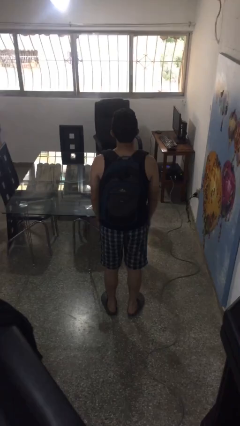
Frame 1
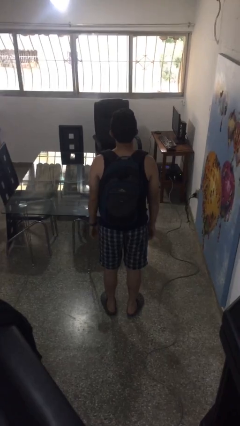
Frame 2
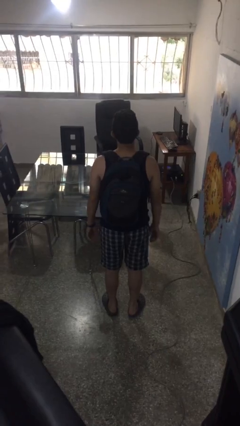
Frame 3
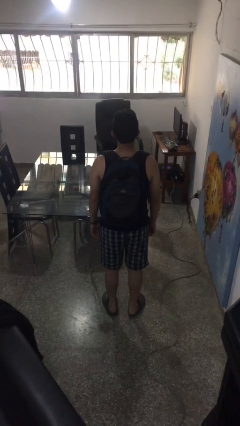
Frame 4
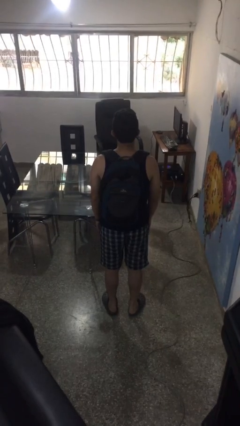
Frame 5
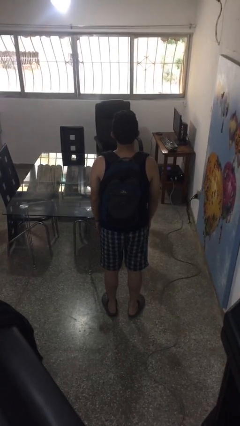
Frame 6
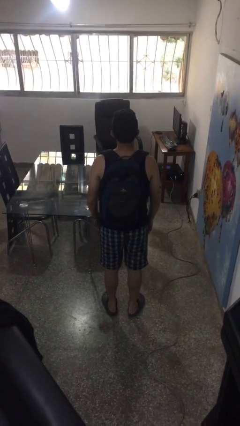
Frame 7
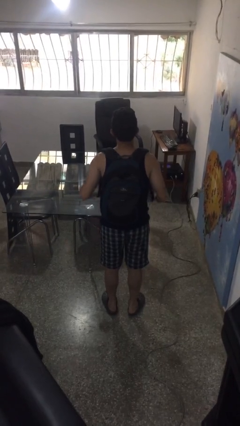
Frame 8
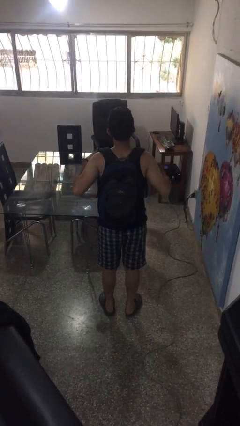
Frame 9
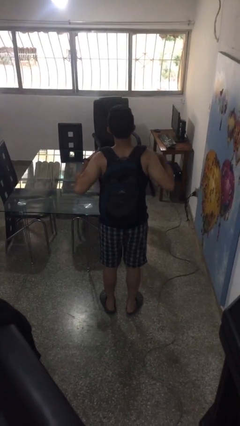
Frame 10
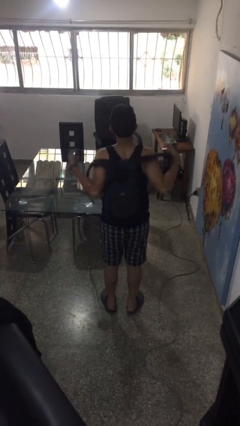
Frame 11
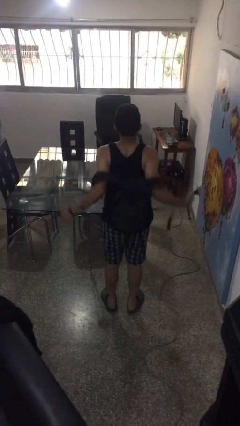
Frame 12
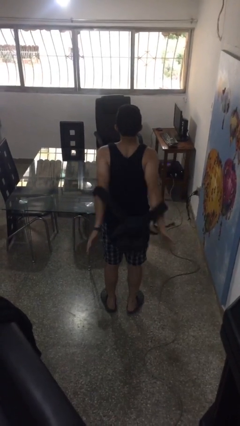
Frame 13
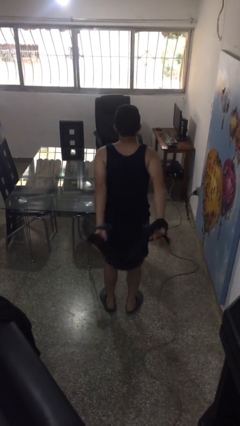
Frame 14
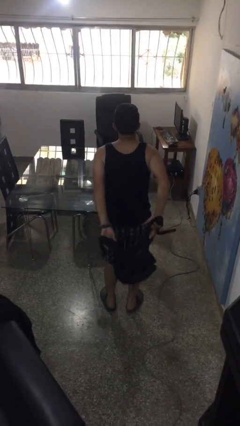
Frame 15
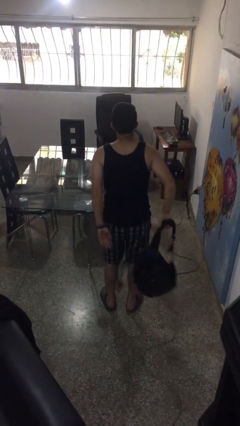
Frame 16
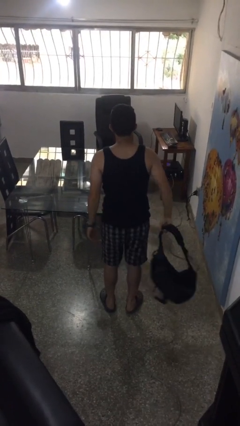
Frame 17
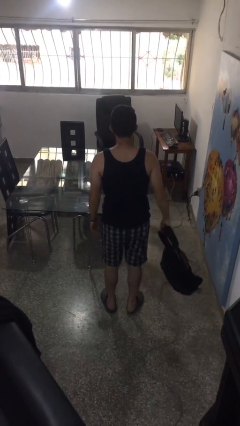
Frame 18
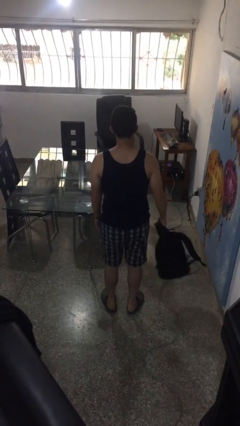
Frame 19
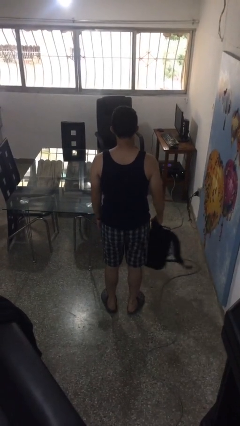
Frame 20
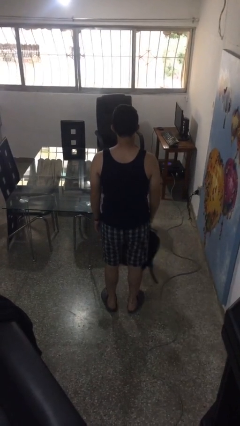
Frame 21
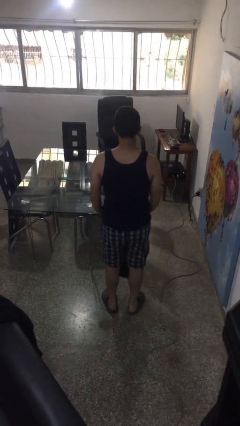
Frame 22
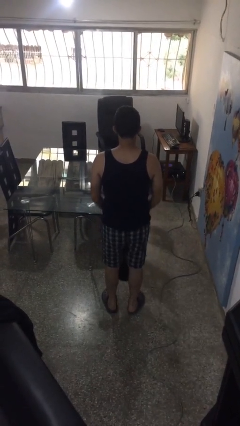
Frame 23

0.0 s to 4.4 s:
person takes off backpack

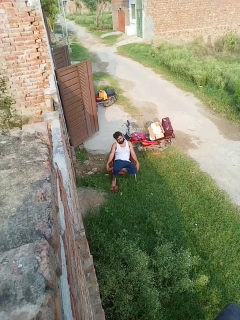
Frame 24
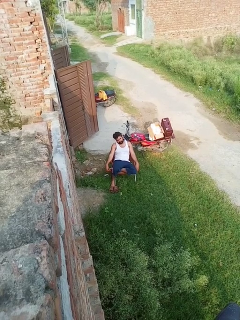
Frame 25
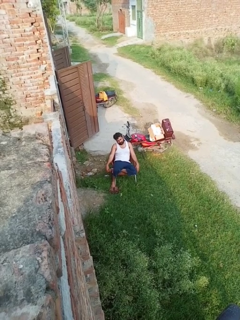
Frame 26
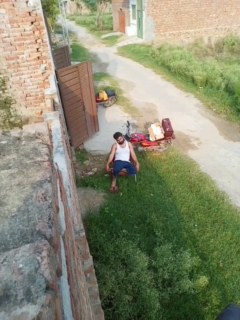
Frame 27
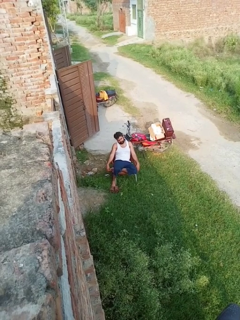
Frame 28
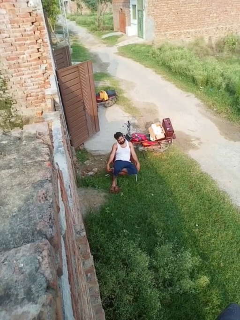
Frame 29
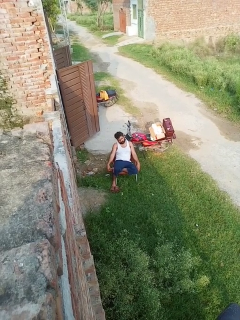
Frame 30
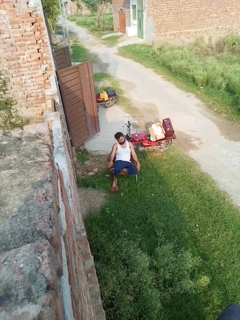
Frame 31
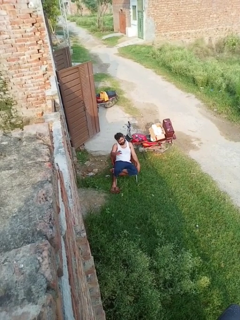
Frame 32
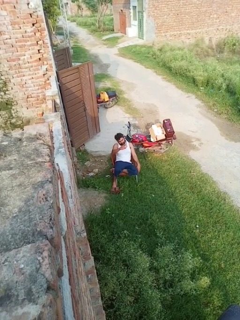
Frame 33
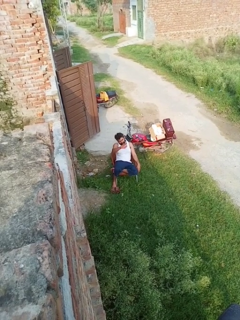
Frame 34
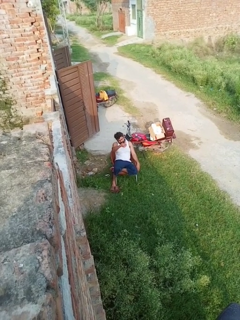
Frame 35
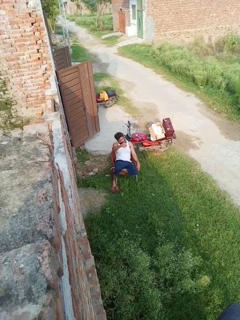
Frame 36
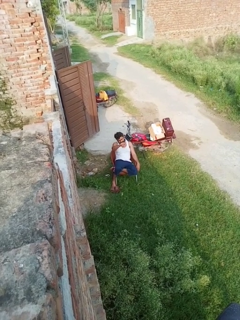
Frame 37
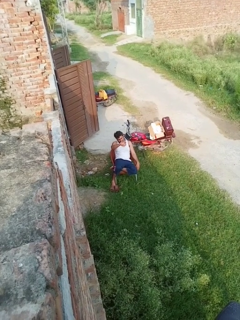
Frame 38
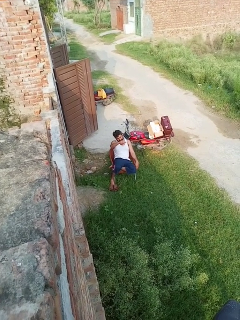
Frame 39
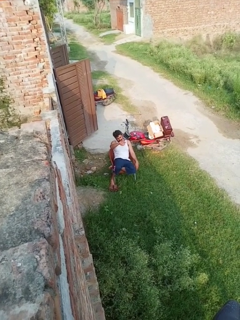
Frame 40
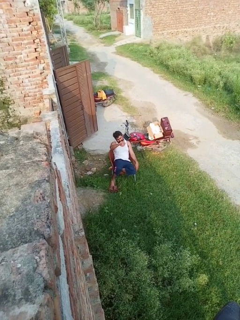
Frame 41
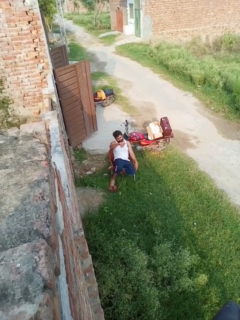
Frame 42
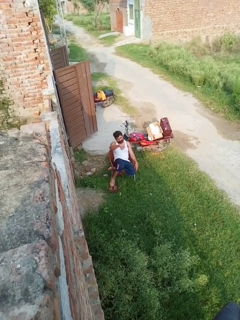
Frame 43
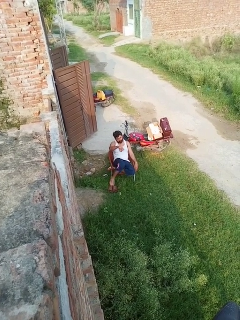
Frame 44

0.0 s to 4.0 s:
person gestures come here

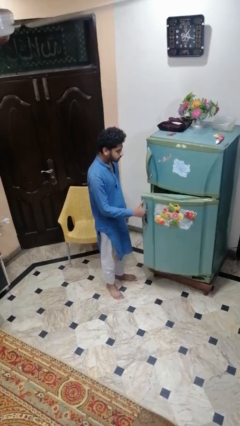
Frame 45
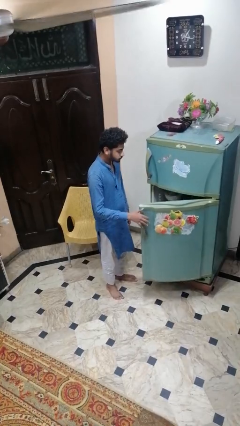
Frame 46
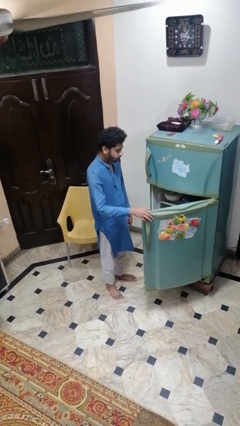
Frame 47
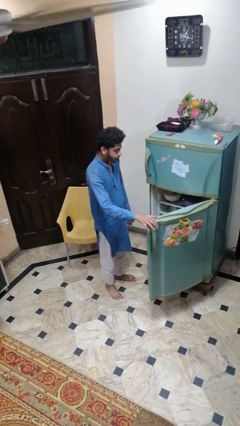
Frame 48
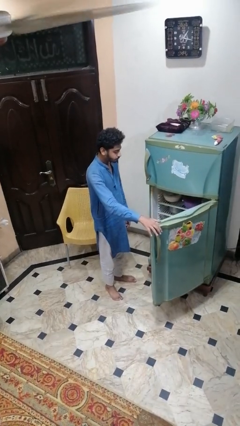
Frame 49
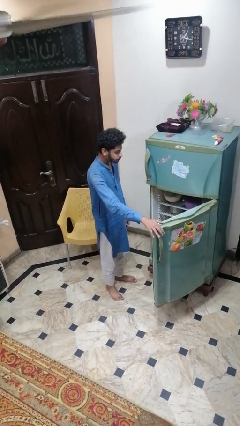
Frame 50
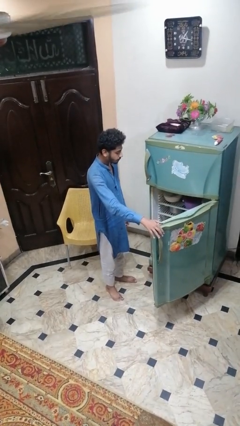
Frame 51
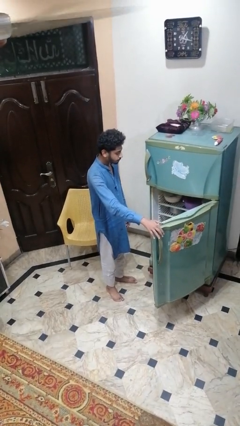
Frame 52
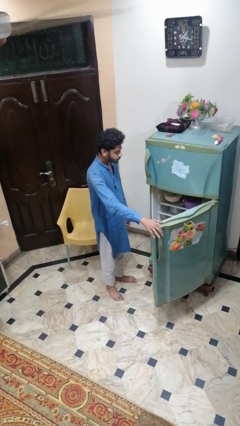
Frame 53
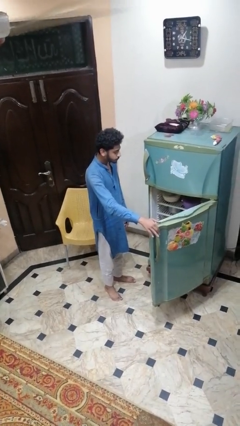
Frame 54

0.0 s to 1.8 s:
person opens refrigerator

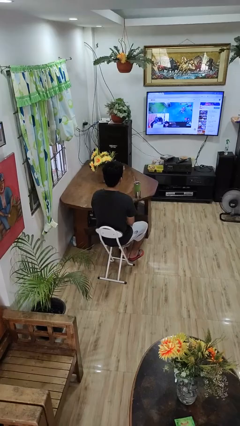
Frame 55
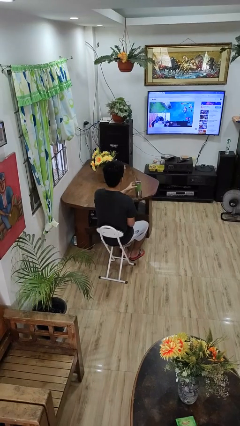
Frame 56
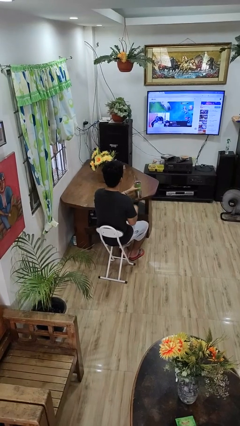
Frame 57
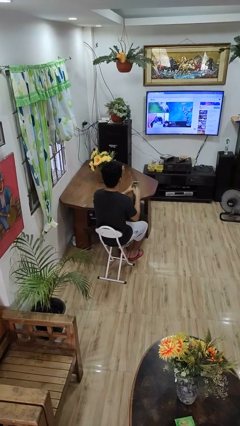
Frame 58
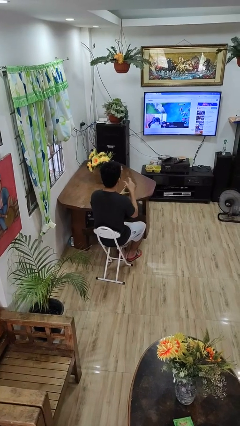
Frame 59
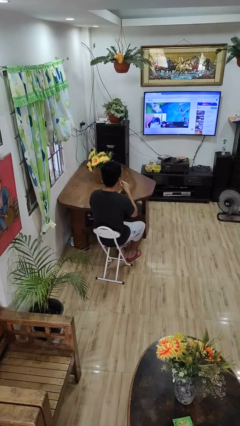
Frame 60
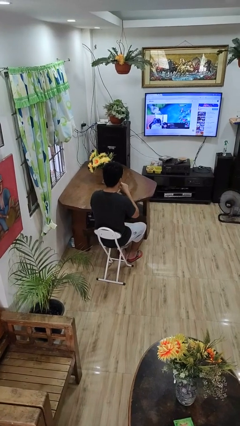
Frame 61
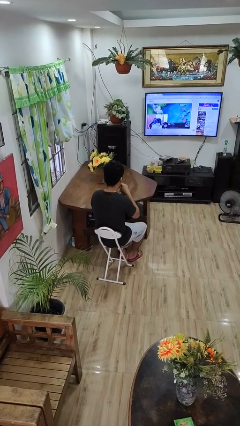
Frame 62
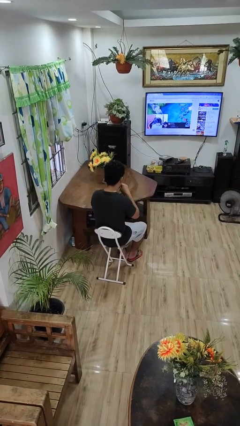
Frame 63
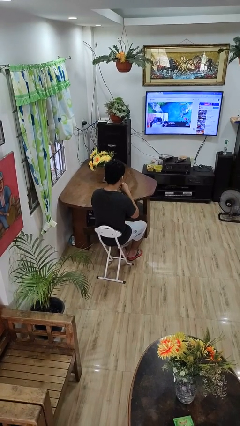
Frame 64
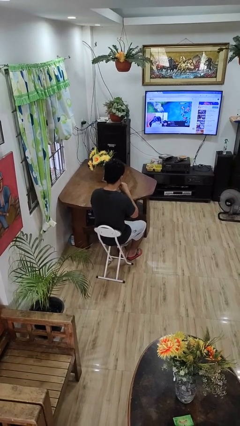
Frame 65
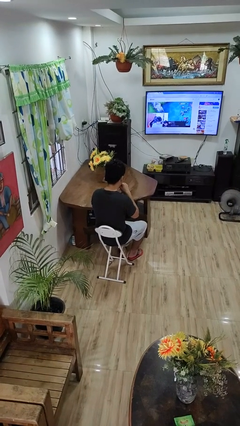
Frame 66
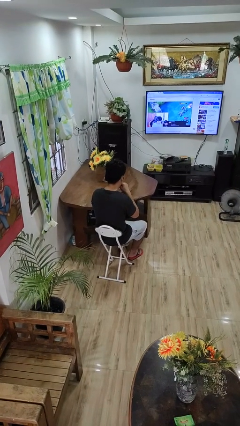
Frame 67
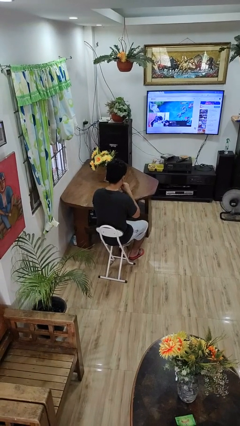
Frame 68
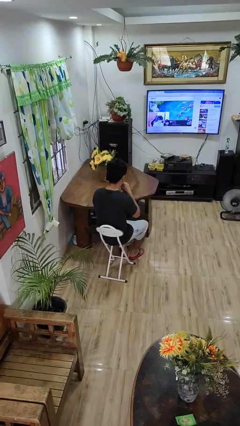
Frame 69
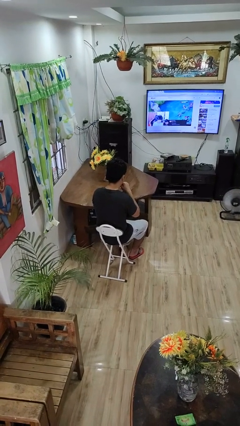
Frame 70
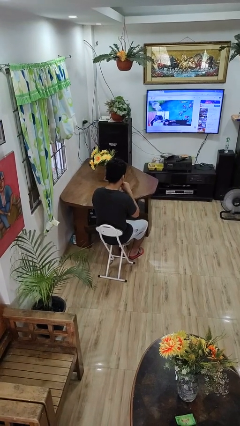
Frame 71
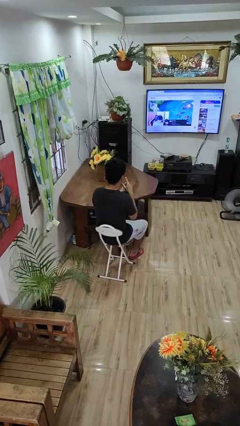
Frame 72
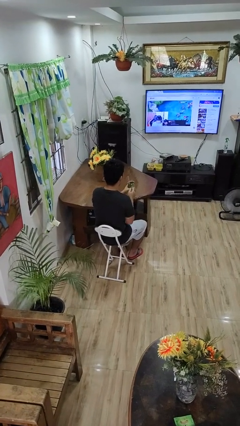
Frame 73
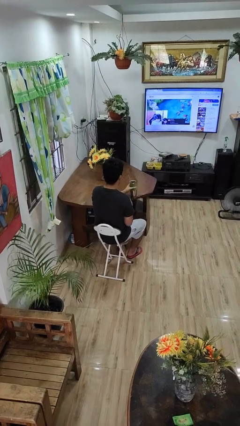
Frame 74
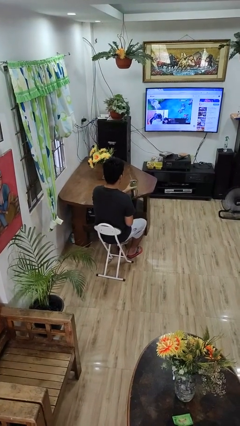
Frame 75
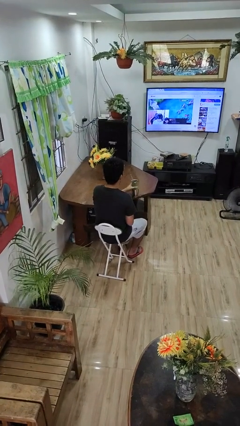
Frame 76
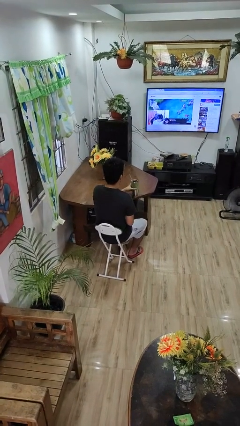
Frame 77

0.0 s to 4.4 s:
person drinks from straw

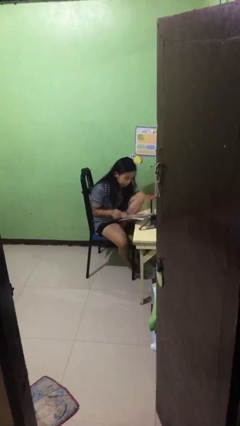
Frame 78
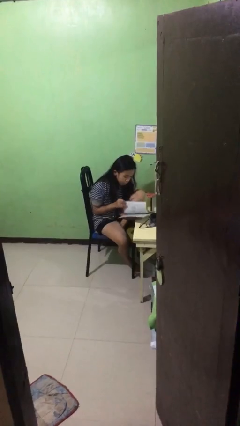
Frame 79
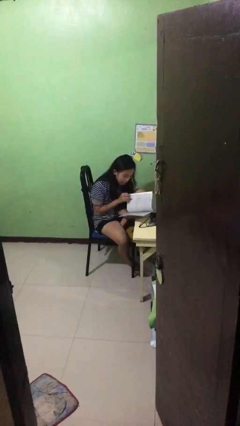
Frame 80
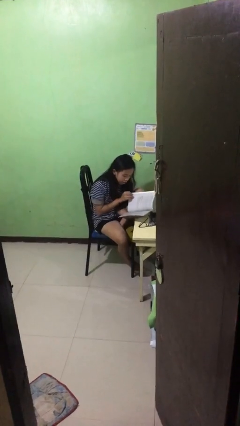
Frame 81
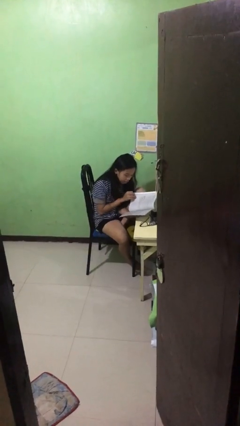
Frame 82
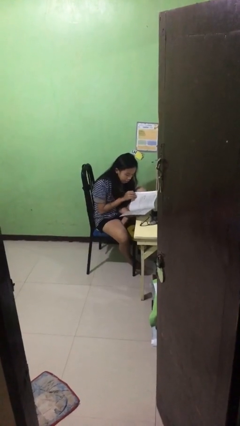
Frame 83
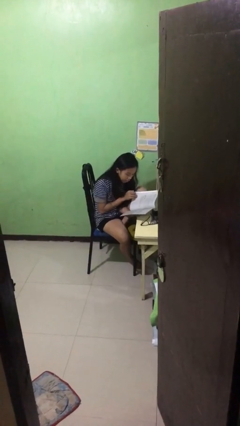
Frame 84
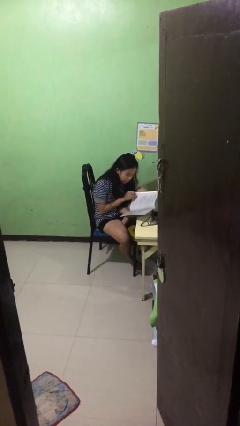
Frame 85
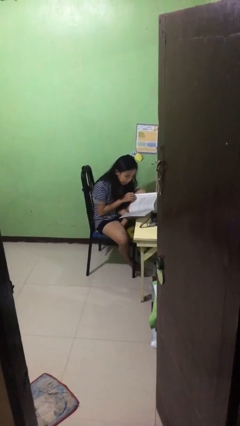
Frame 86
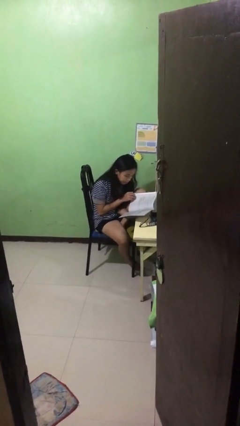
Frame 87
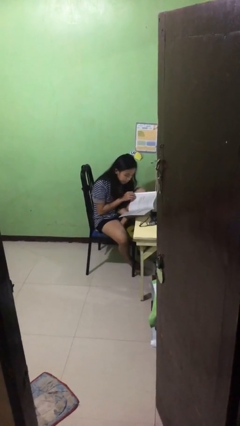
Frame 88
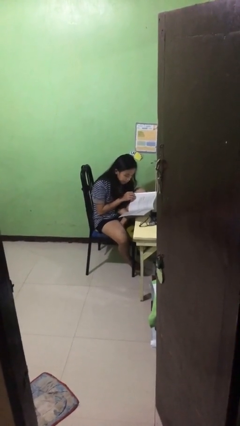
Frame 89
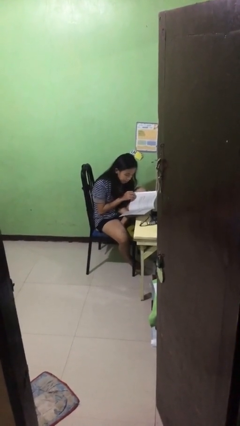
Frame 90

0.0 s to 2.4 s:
person reads document

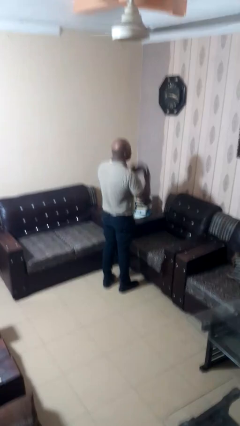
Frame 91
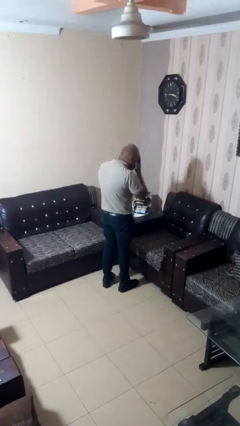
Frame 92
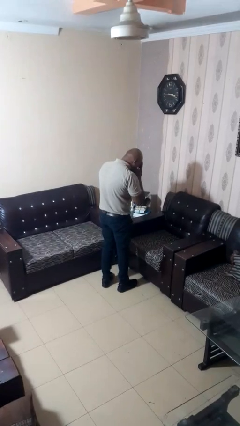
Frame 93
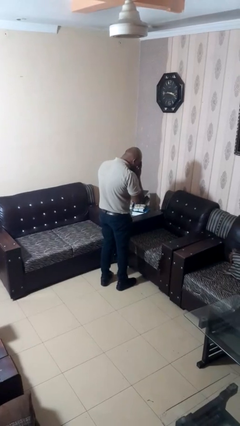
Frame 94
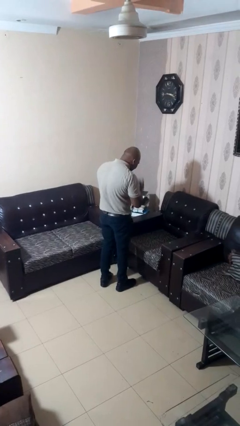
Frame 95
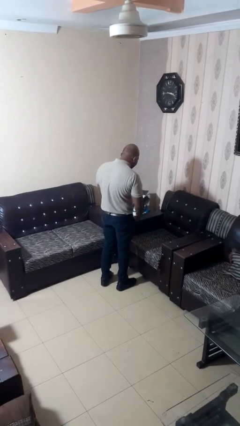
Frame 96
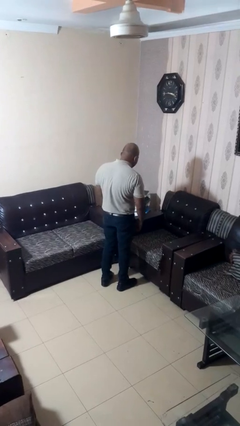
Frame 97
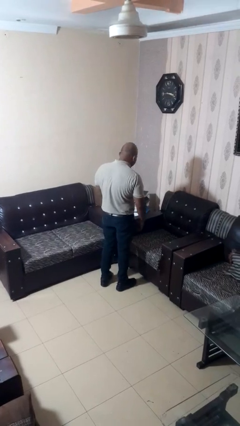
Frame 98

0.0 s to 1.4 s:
person sneezes into hand

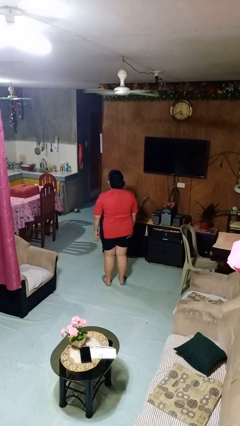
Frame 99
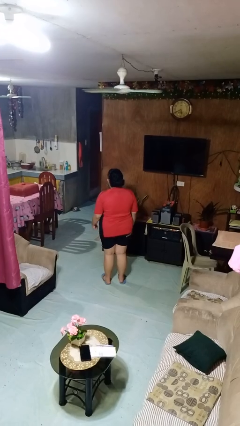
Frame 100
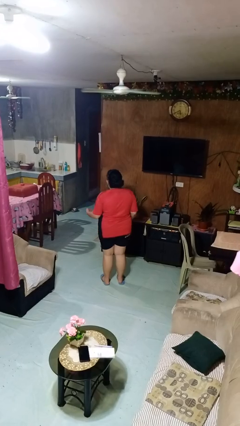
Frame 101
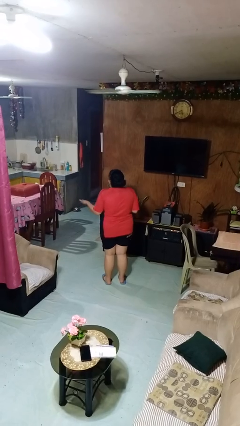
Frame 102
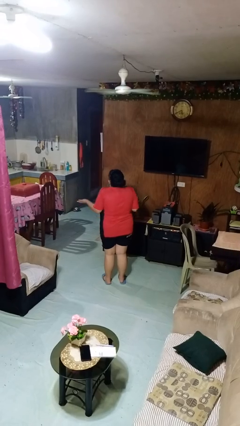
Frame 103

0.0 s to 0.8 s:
person shrugs
